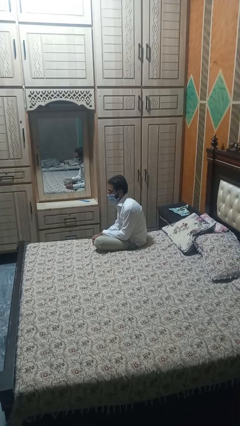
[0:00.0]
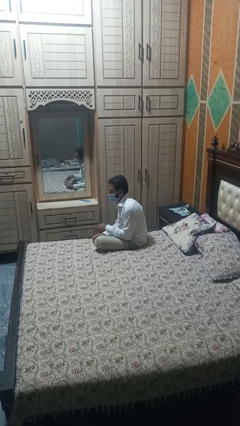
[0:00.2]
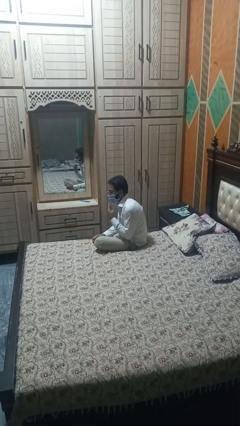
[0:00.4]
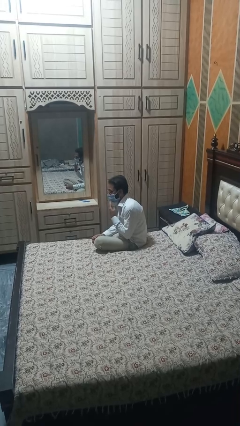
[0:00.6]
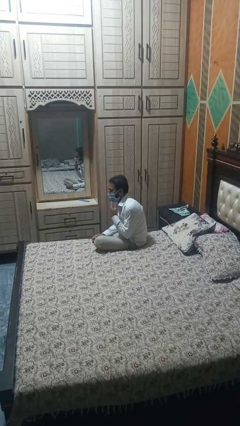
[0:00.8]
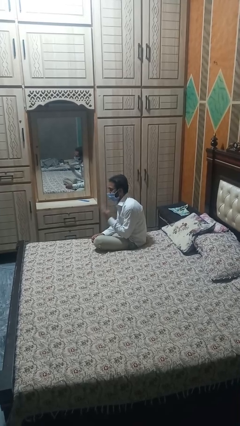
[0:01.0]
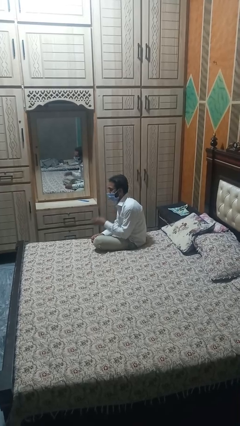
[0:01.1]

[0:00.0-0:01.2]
person strokes chin

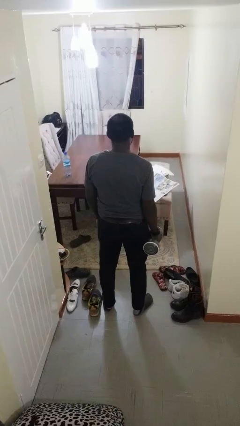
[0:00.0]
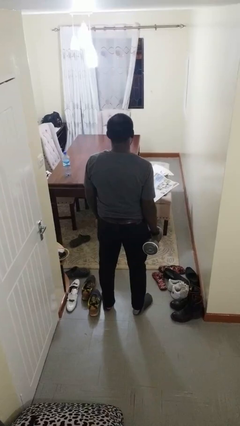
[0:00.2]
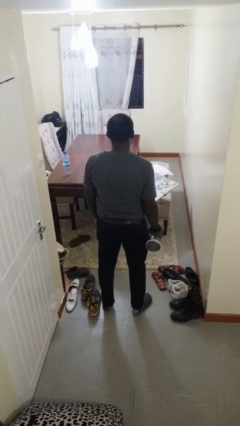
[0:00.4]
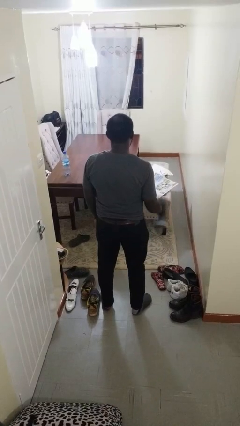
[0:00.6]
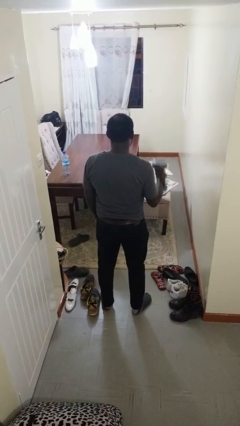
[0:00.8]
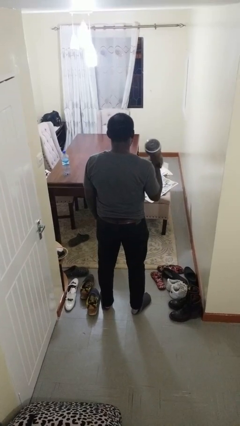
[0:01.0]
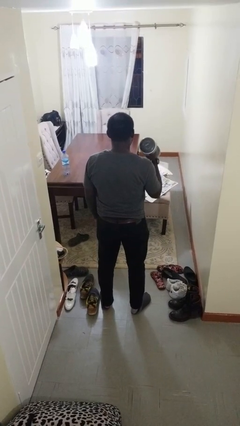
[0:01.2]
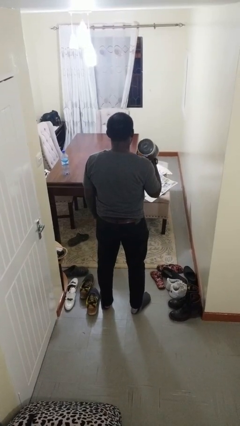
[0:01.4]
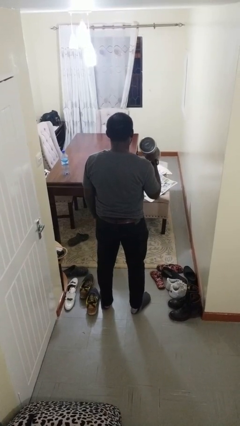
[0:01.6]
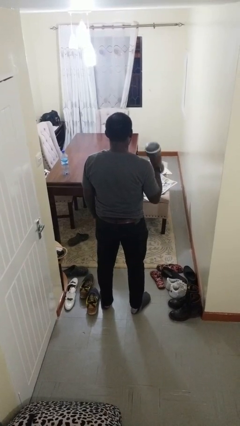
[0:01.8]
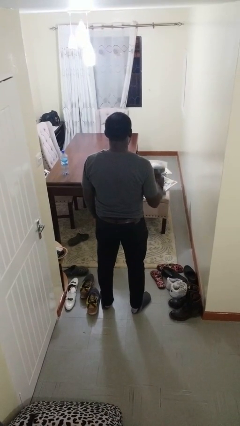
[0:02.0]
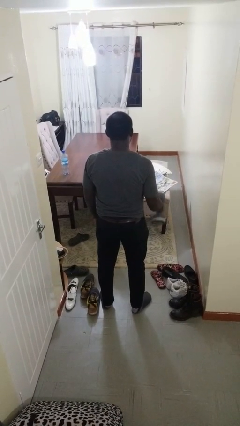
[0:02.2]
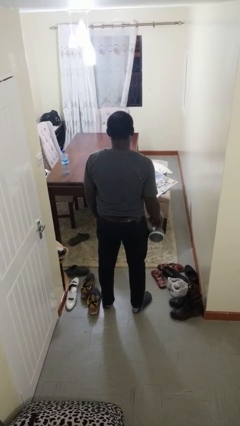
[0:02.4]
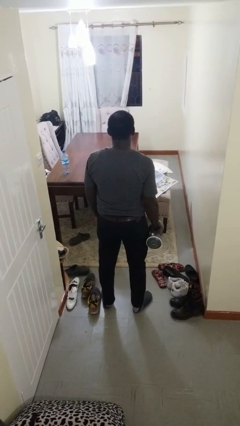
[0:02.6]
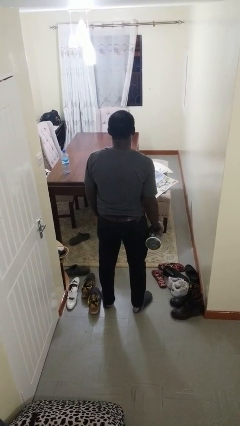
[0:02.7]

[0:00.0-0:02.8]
person lifts dumbbells

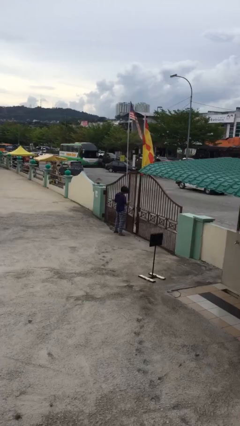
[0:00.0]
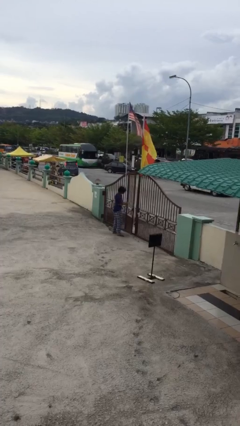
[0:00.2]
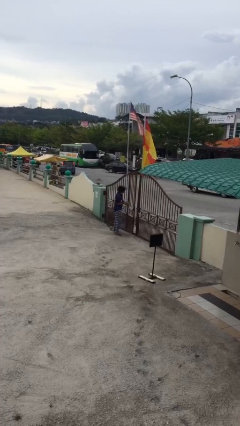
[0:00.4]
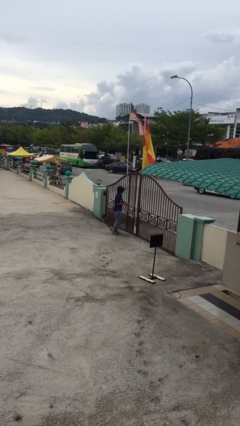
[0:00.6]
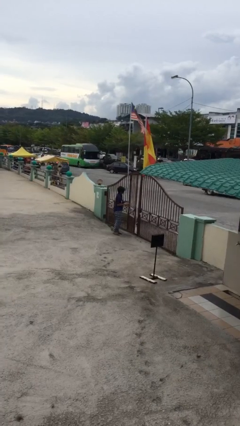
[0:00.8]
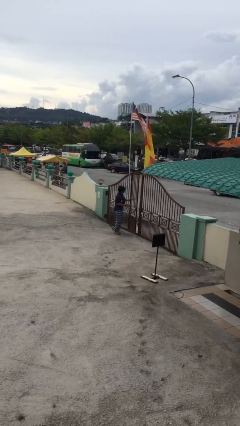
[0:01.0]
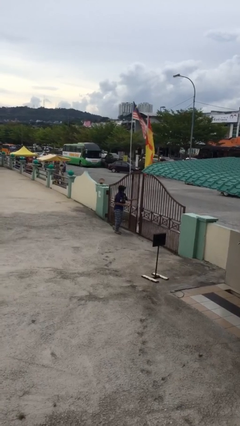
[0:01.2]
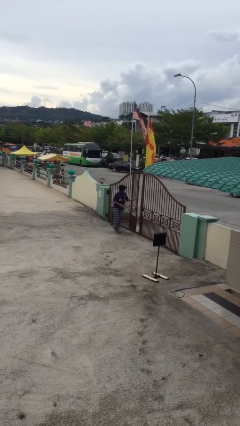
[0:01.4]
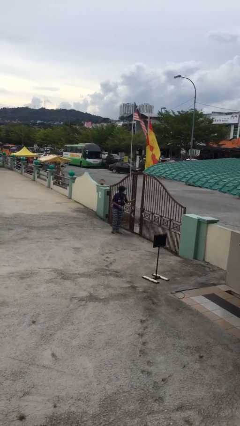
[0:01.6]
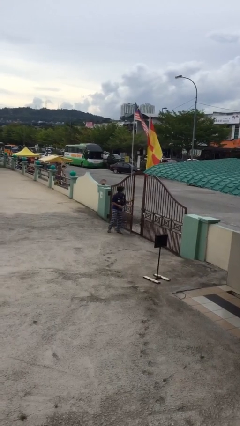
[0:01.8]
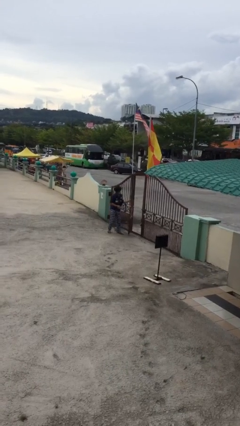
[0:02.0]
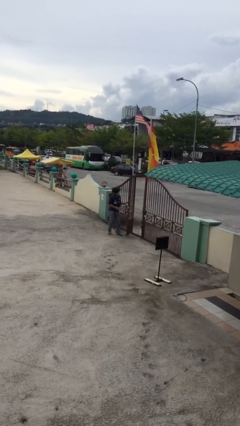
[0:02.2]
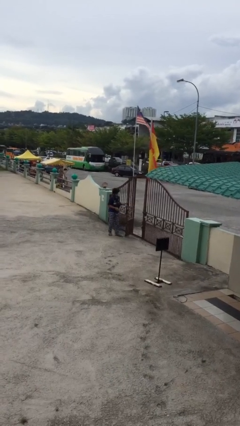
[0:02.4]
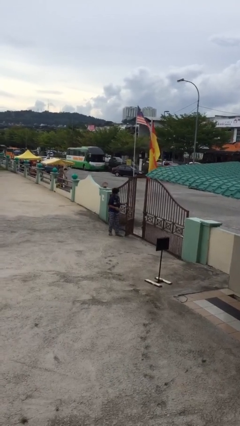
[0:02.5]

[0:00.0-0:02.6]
person opens facility door

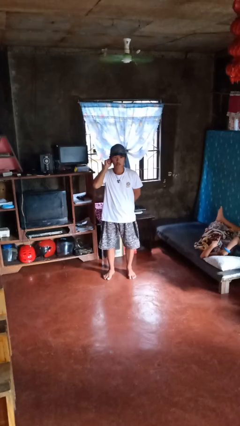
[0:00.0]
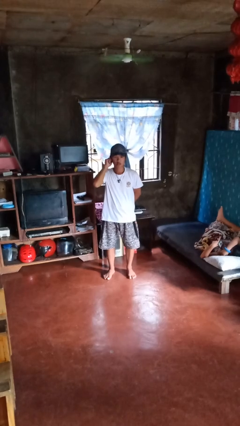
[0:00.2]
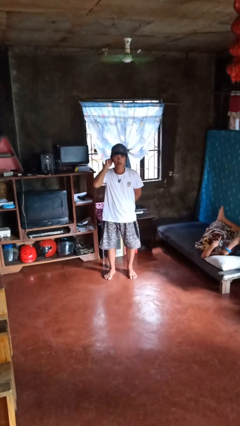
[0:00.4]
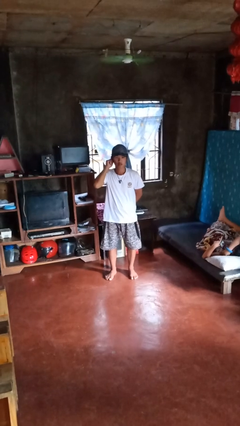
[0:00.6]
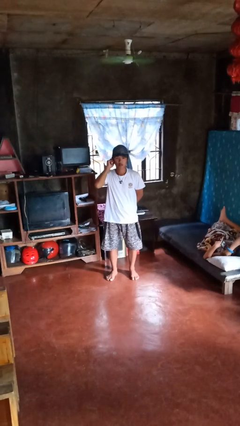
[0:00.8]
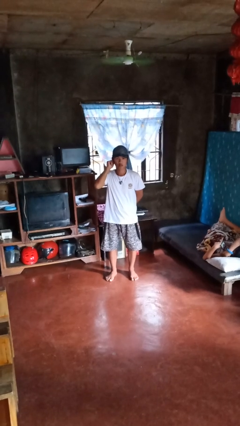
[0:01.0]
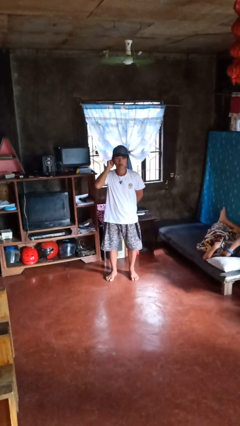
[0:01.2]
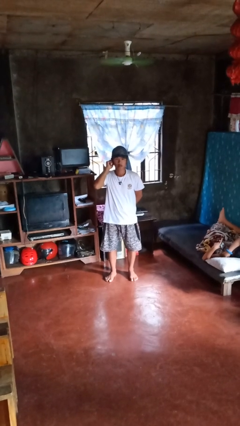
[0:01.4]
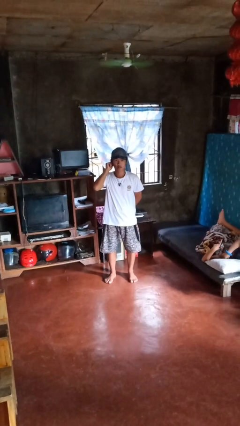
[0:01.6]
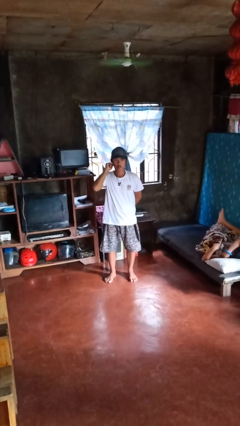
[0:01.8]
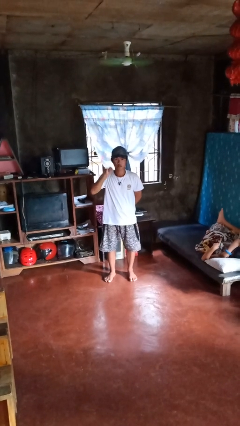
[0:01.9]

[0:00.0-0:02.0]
person touches earlobe

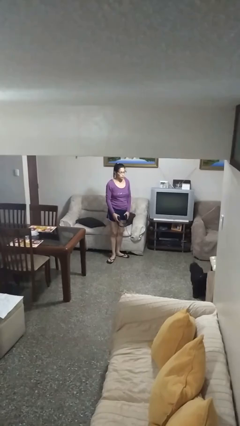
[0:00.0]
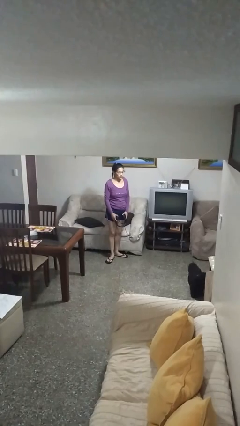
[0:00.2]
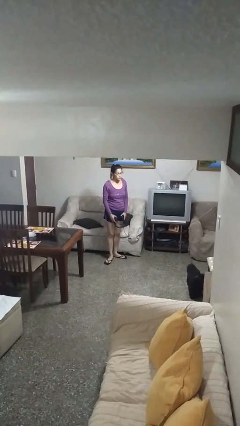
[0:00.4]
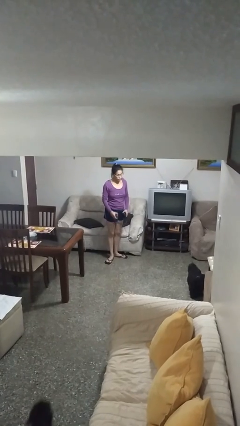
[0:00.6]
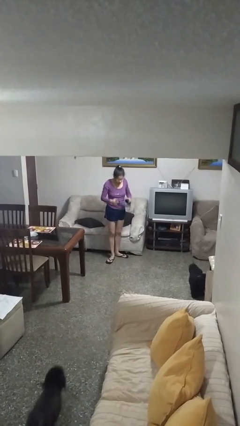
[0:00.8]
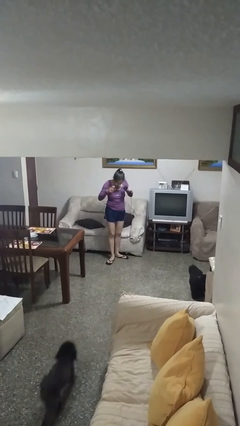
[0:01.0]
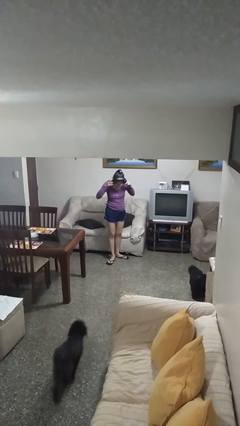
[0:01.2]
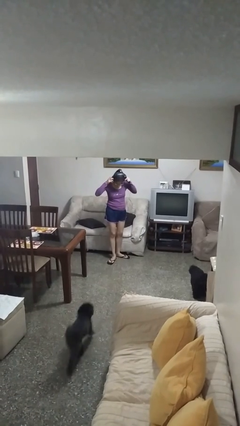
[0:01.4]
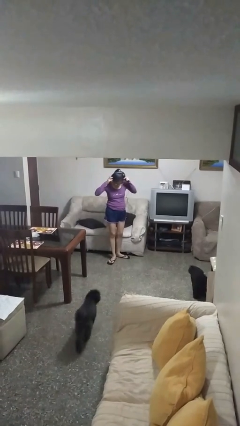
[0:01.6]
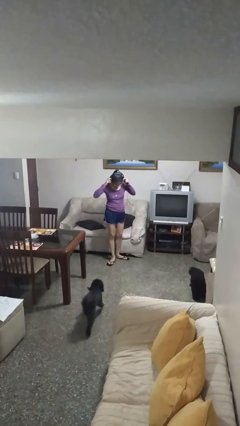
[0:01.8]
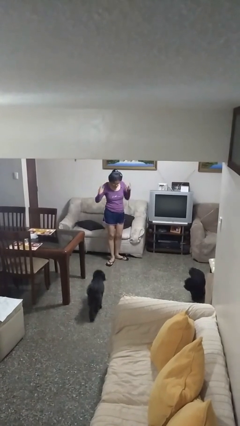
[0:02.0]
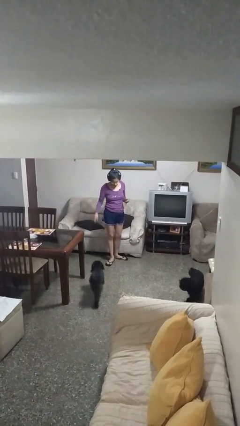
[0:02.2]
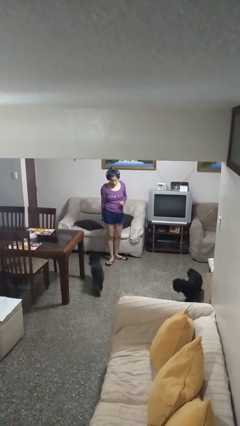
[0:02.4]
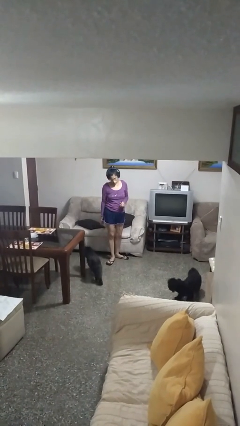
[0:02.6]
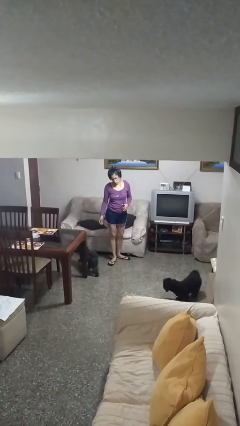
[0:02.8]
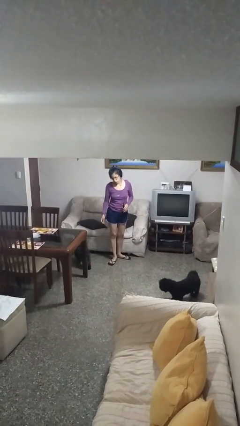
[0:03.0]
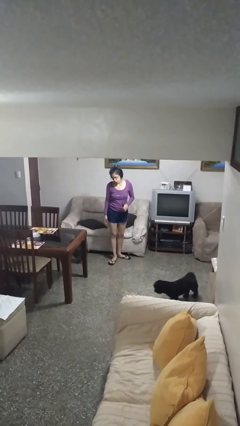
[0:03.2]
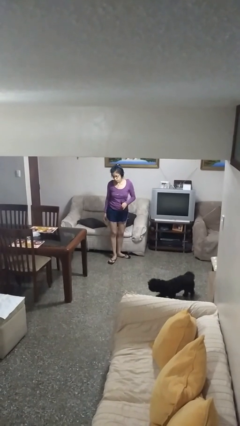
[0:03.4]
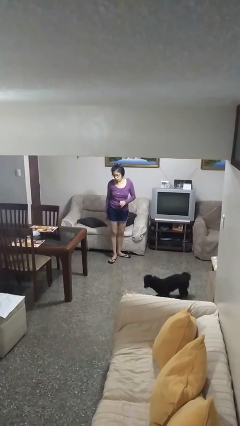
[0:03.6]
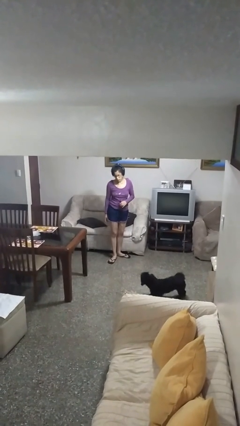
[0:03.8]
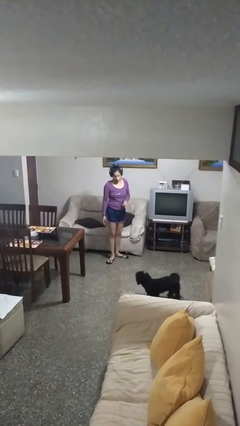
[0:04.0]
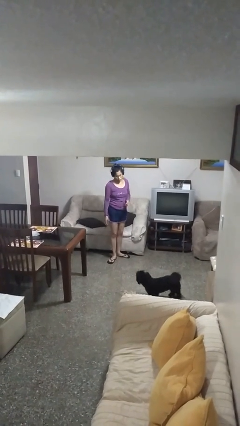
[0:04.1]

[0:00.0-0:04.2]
person puts on headphones

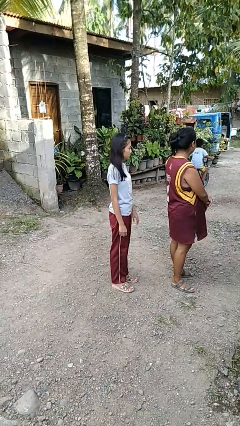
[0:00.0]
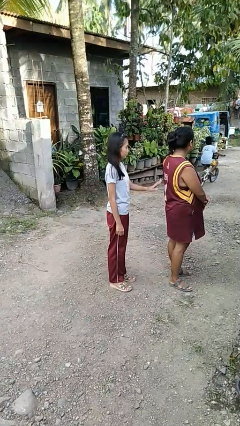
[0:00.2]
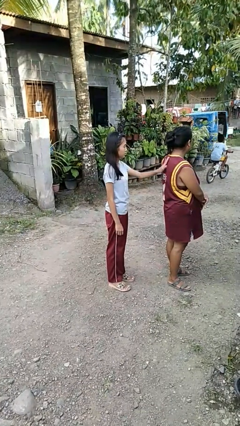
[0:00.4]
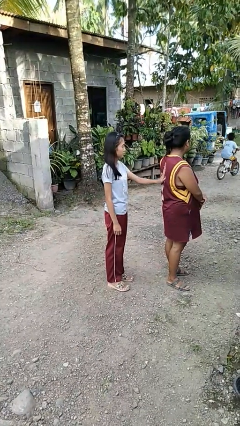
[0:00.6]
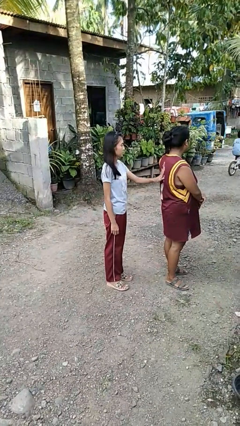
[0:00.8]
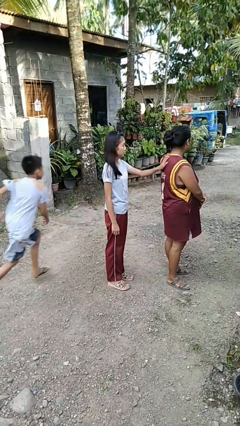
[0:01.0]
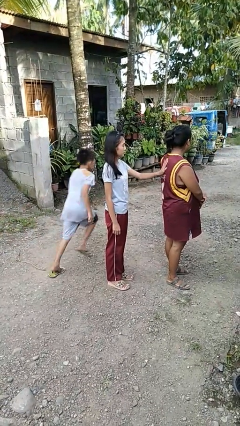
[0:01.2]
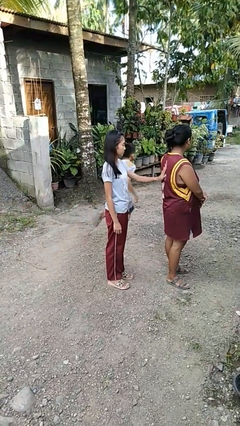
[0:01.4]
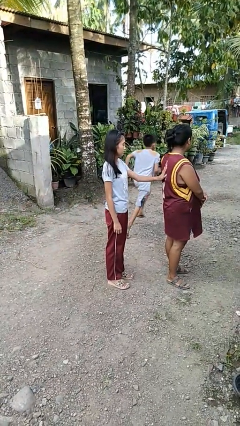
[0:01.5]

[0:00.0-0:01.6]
person touches back of person

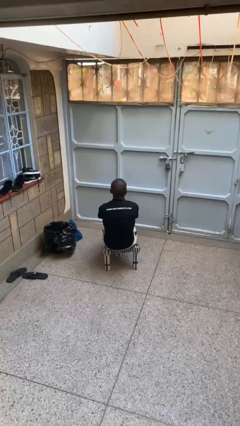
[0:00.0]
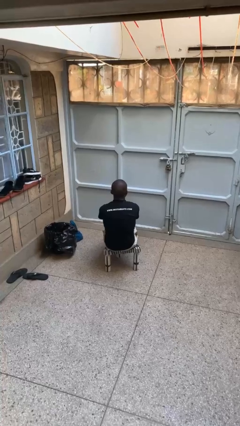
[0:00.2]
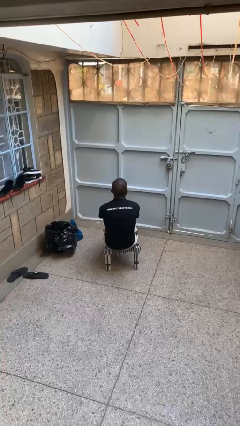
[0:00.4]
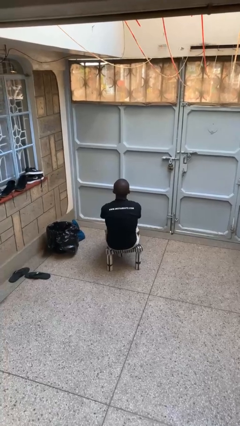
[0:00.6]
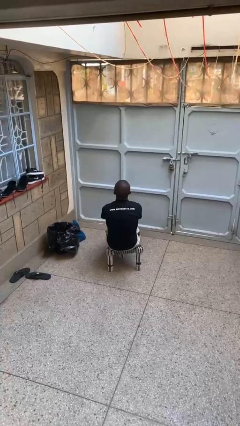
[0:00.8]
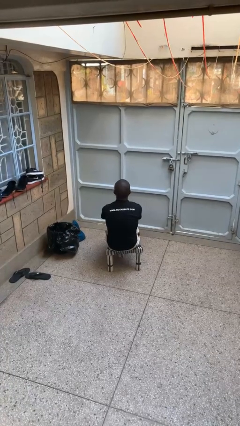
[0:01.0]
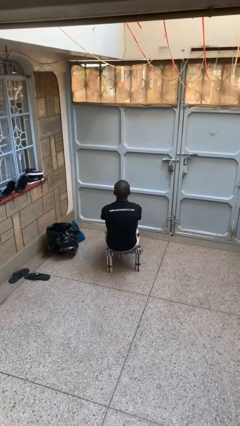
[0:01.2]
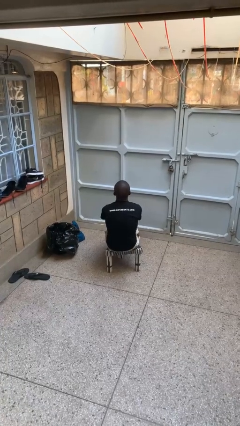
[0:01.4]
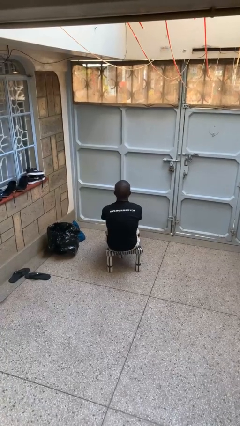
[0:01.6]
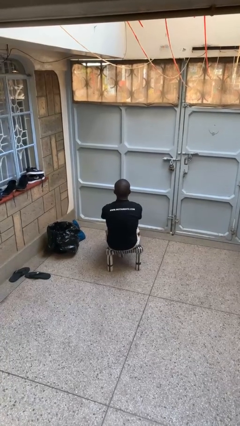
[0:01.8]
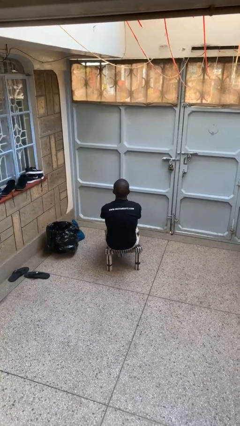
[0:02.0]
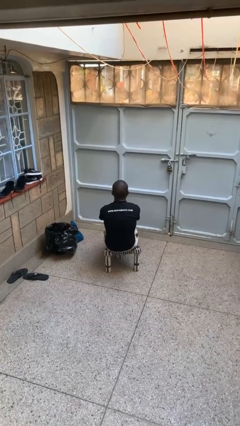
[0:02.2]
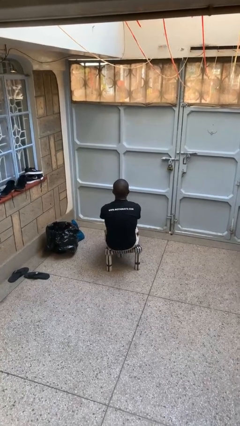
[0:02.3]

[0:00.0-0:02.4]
person nods head

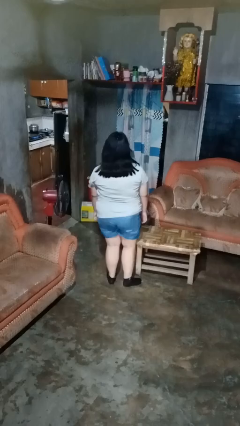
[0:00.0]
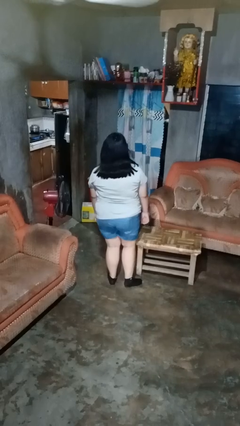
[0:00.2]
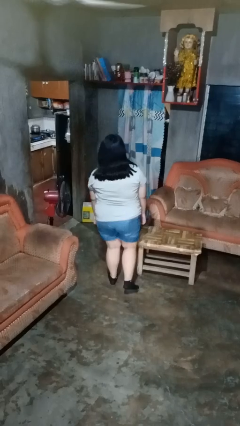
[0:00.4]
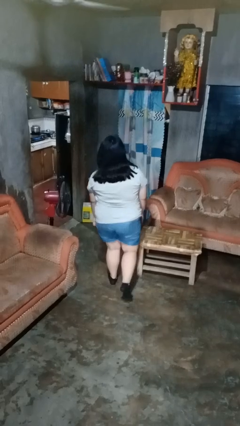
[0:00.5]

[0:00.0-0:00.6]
person bumps into table
